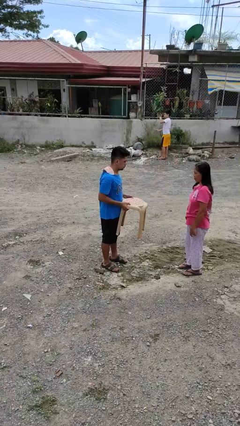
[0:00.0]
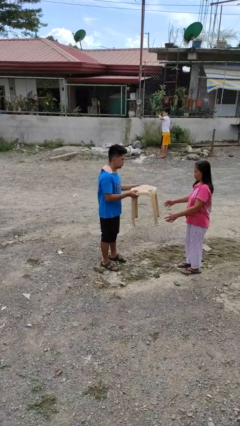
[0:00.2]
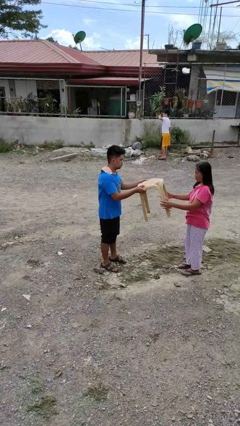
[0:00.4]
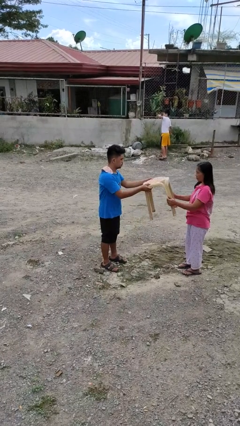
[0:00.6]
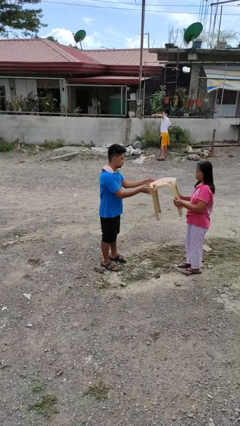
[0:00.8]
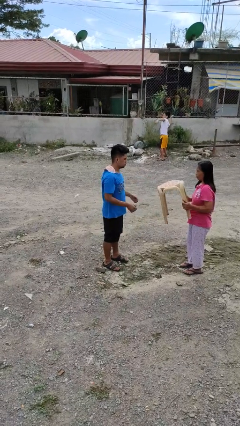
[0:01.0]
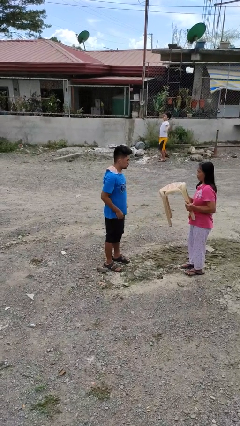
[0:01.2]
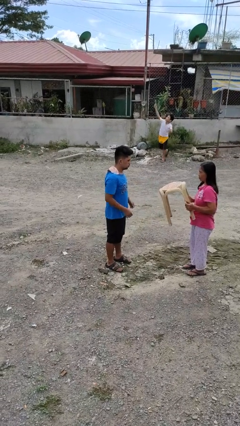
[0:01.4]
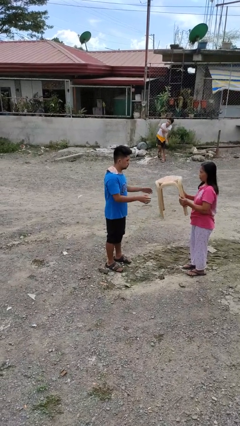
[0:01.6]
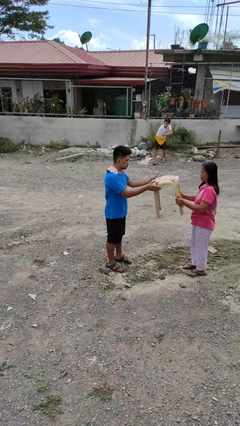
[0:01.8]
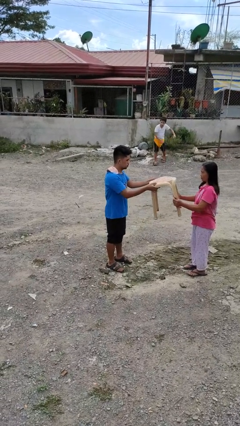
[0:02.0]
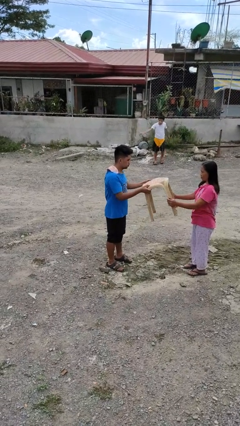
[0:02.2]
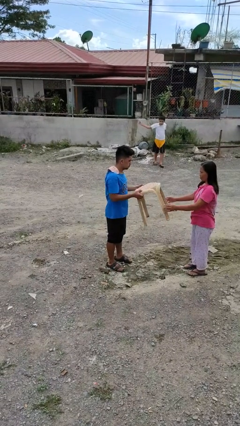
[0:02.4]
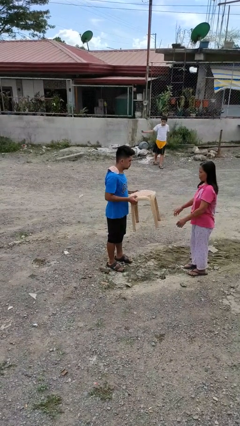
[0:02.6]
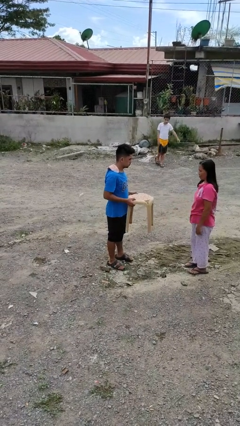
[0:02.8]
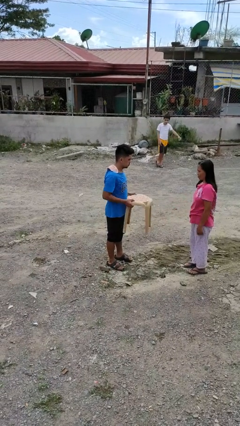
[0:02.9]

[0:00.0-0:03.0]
person transfers object to person

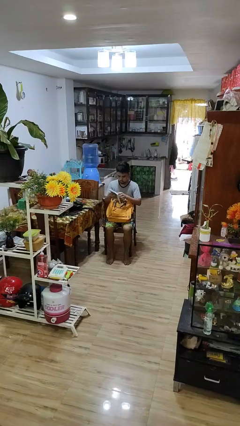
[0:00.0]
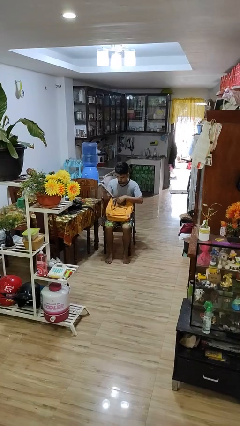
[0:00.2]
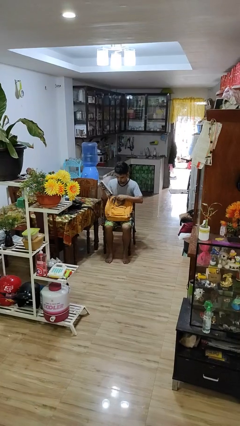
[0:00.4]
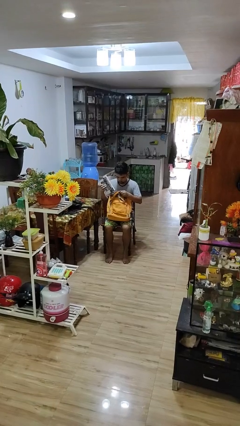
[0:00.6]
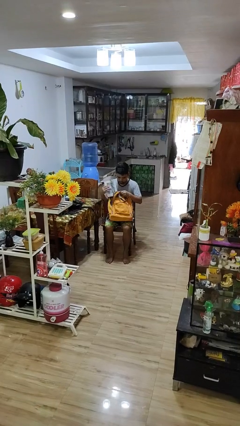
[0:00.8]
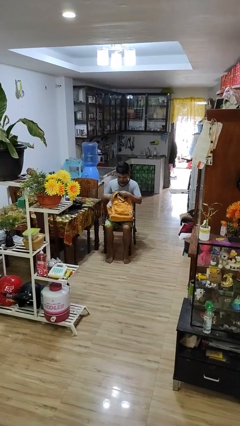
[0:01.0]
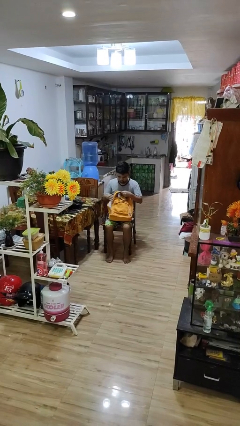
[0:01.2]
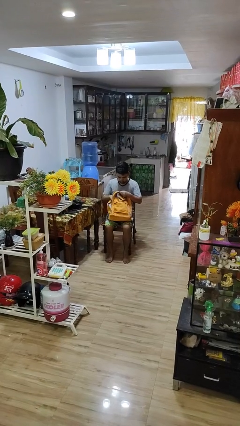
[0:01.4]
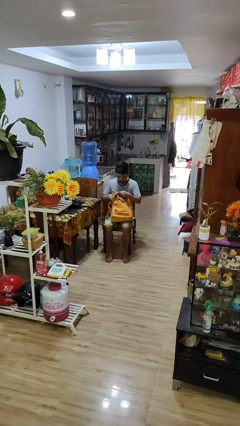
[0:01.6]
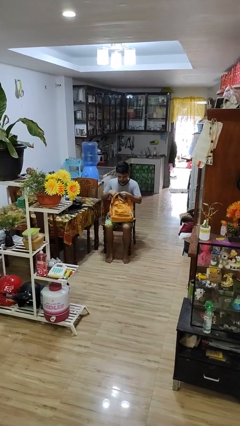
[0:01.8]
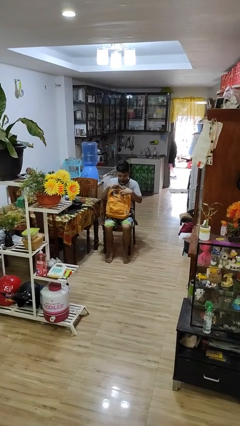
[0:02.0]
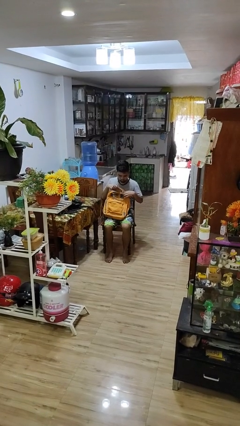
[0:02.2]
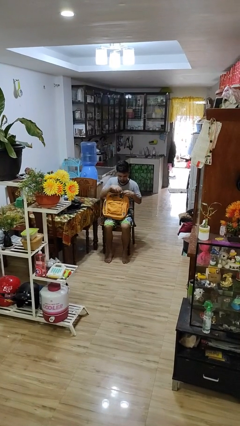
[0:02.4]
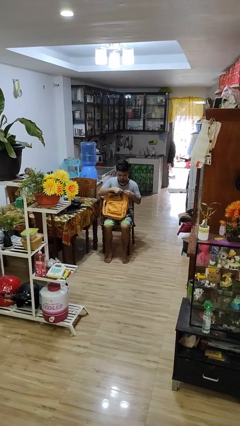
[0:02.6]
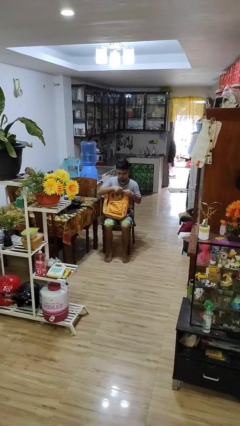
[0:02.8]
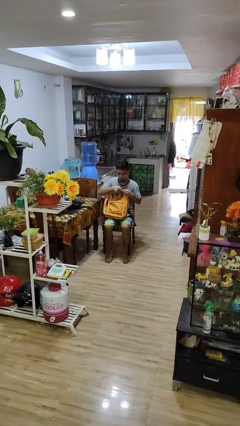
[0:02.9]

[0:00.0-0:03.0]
person puts object into backpack

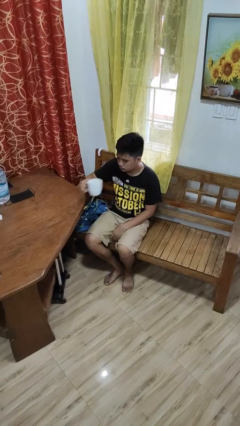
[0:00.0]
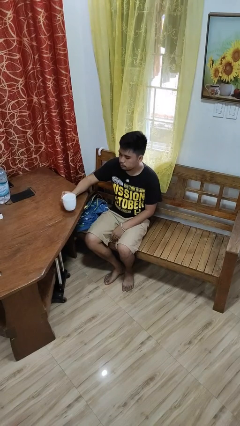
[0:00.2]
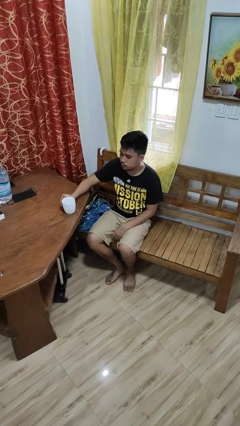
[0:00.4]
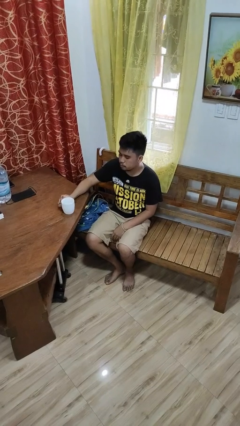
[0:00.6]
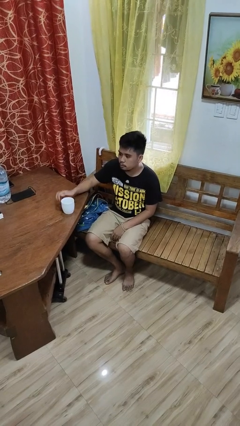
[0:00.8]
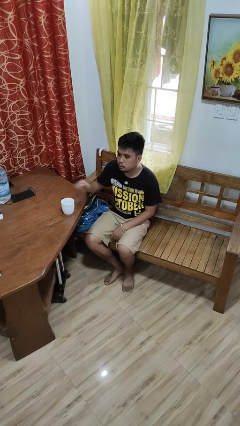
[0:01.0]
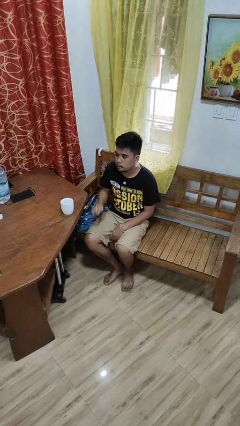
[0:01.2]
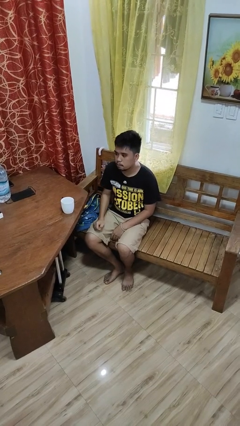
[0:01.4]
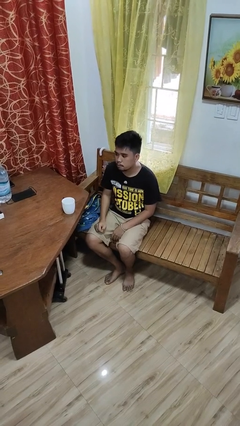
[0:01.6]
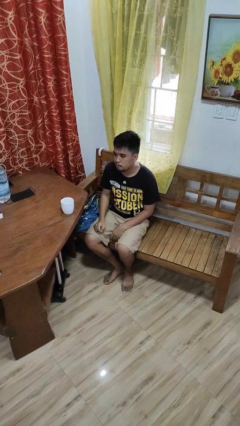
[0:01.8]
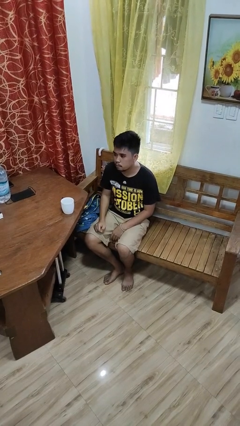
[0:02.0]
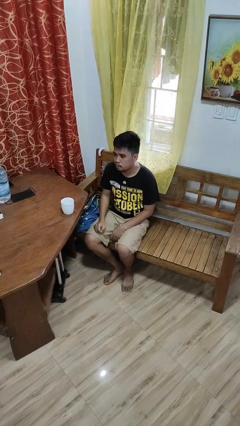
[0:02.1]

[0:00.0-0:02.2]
person puts down object on table

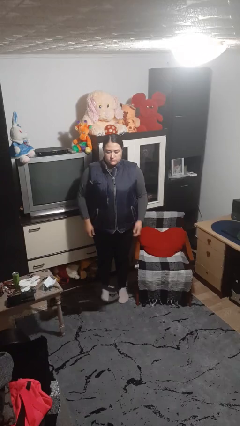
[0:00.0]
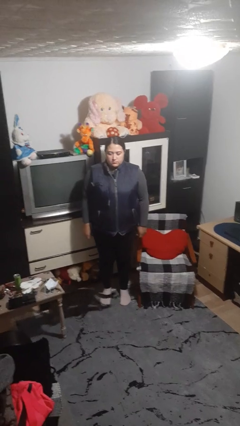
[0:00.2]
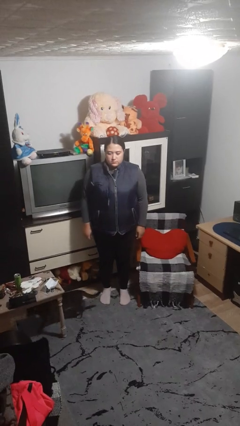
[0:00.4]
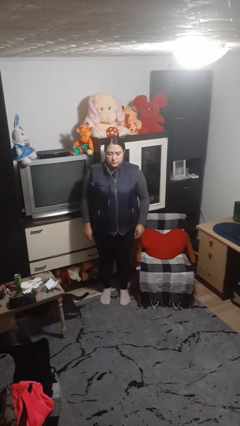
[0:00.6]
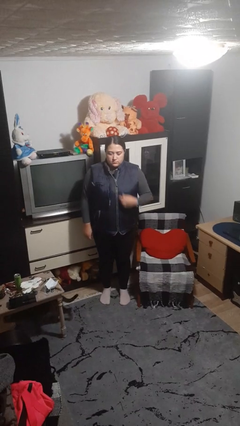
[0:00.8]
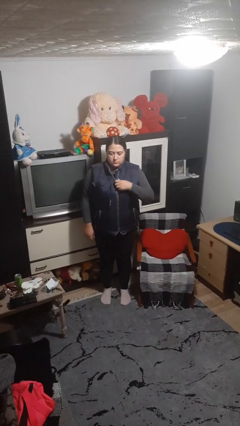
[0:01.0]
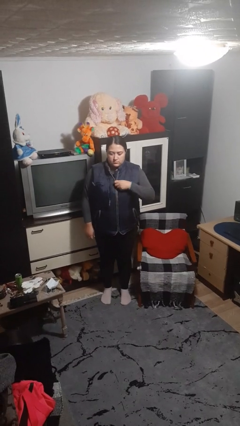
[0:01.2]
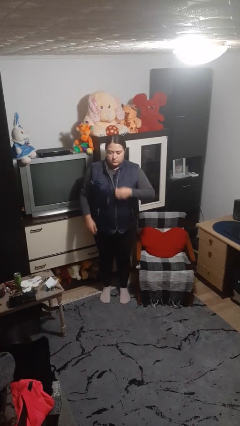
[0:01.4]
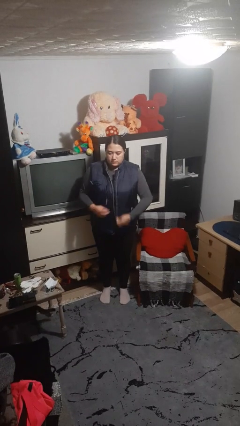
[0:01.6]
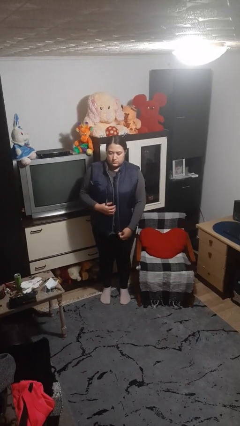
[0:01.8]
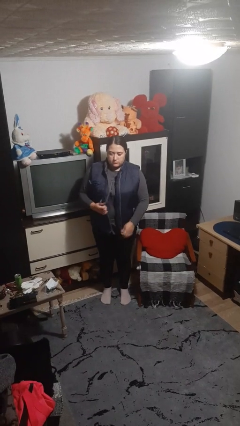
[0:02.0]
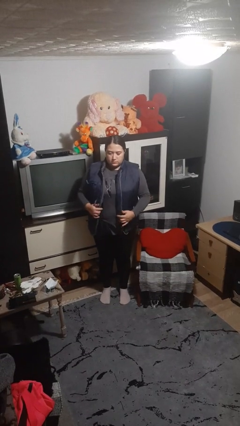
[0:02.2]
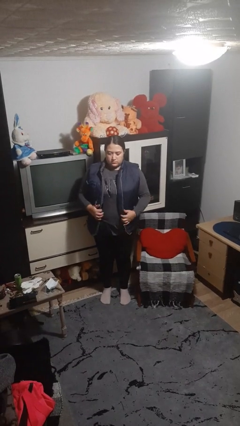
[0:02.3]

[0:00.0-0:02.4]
person unzips jacket

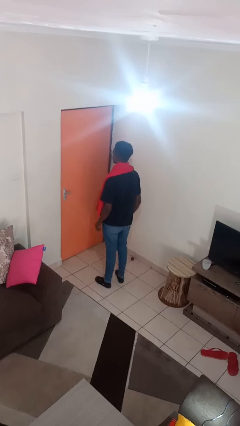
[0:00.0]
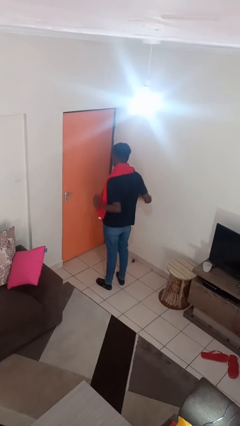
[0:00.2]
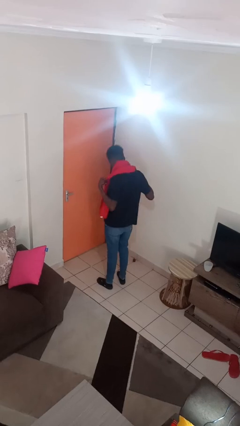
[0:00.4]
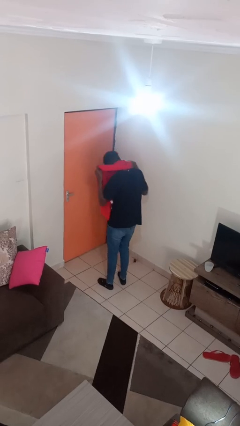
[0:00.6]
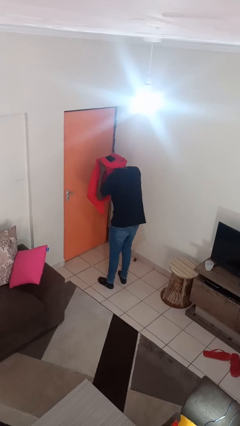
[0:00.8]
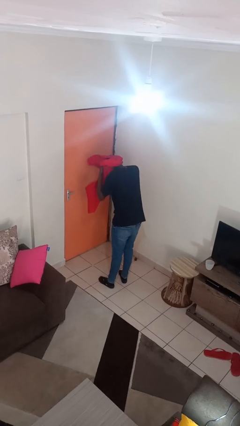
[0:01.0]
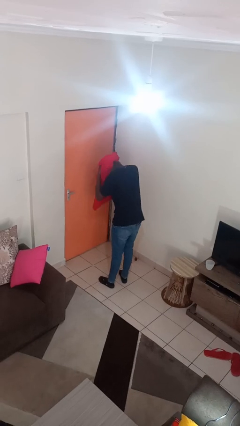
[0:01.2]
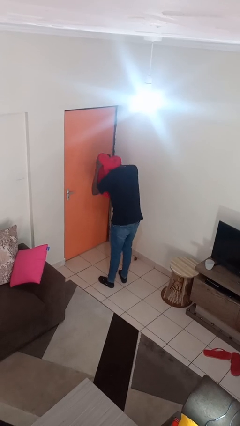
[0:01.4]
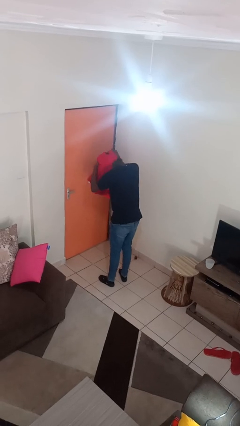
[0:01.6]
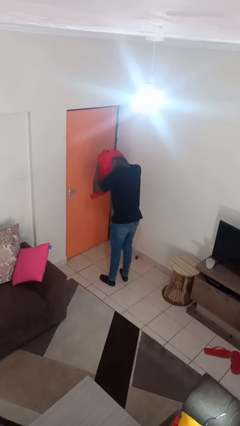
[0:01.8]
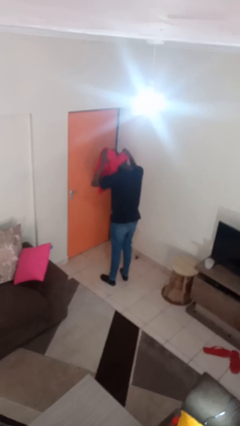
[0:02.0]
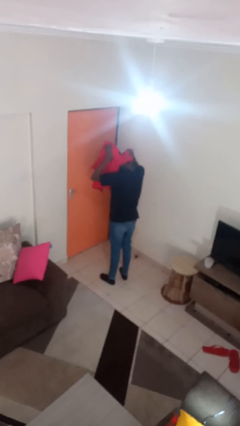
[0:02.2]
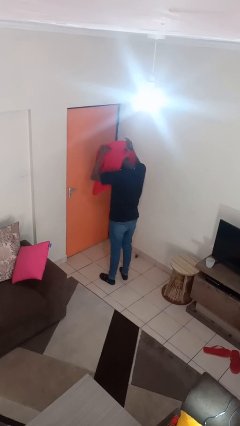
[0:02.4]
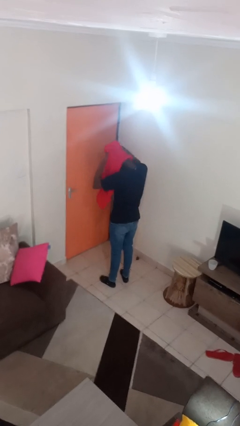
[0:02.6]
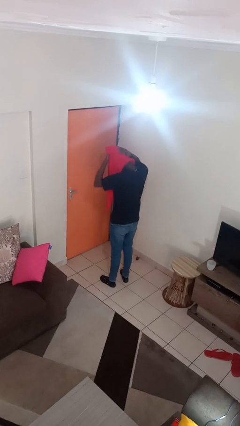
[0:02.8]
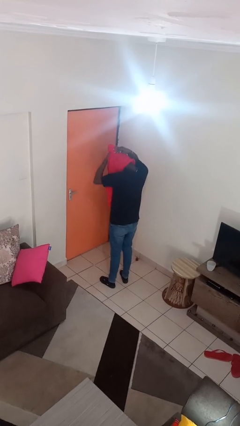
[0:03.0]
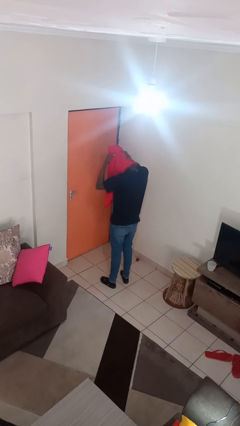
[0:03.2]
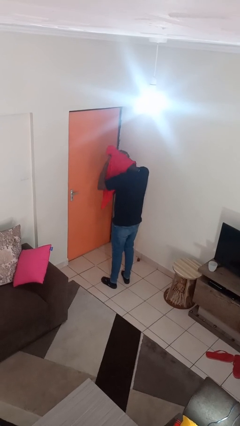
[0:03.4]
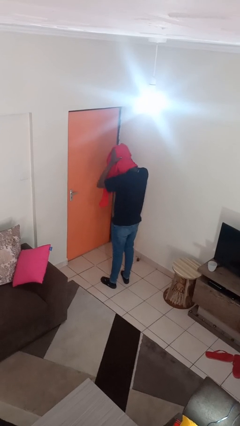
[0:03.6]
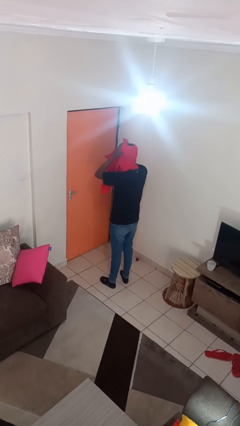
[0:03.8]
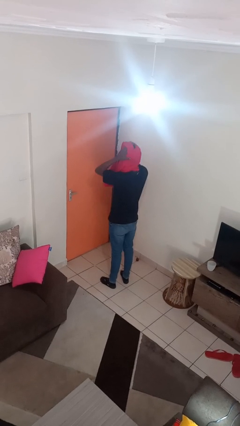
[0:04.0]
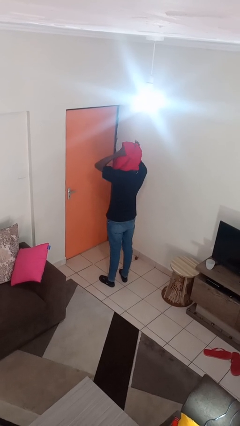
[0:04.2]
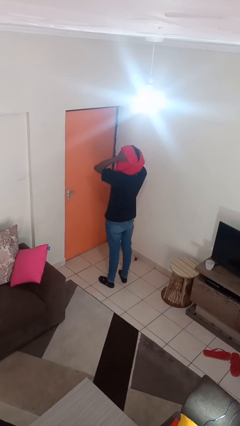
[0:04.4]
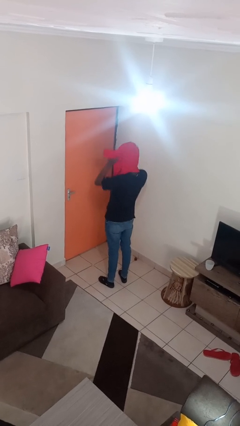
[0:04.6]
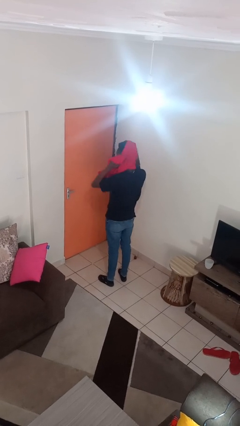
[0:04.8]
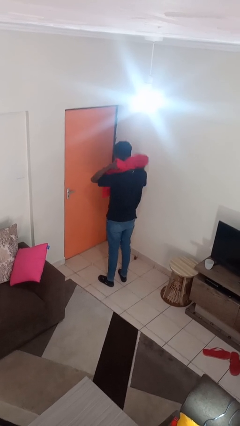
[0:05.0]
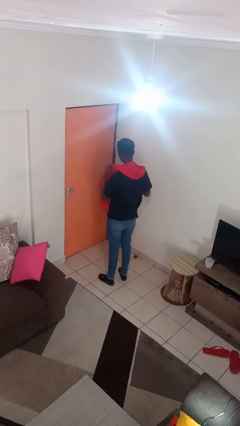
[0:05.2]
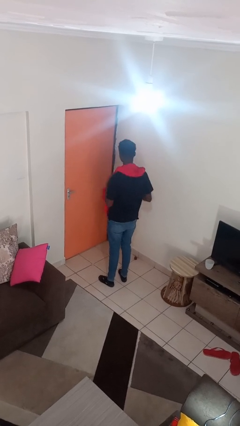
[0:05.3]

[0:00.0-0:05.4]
person dries hair with towel

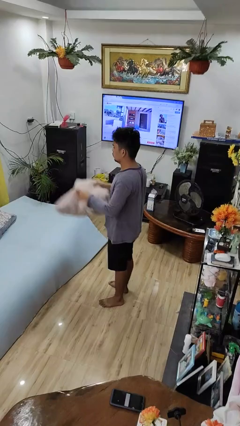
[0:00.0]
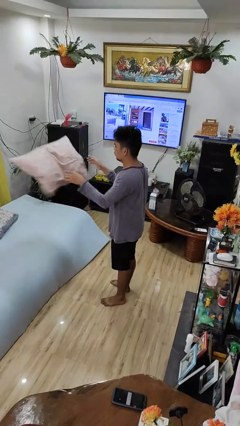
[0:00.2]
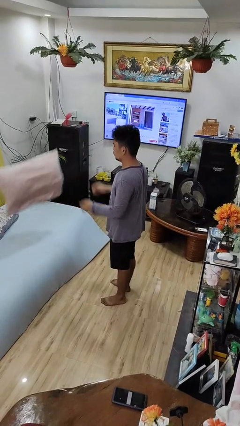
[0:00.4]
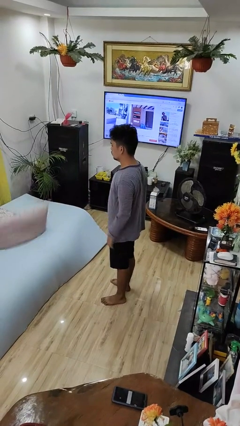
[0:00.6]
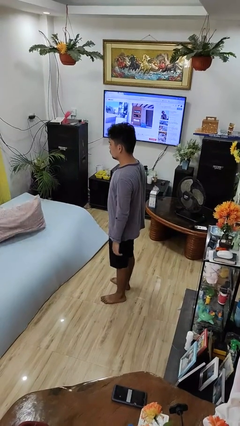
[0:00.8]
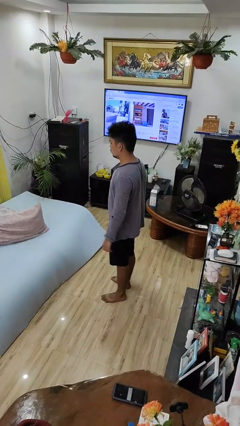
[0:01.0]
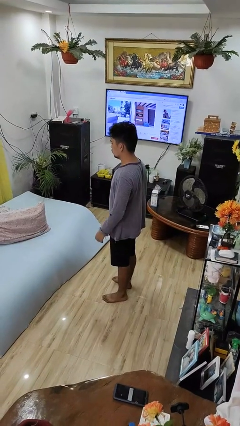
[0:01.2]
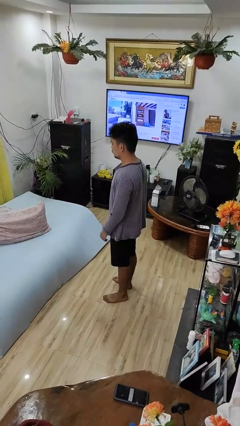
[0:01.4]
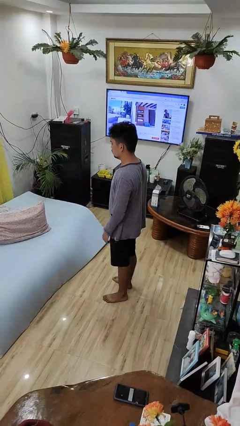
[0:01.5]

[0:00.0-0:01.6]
person throws object on bed
